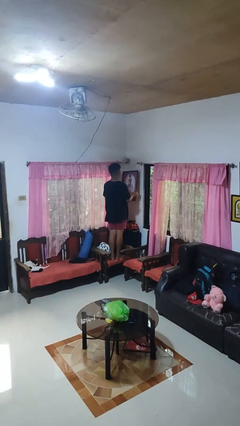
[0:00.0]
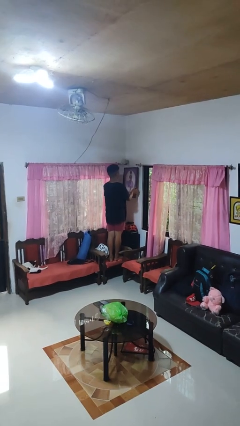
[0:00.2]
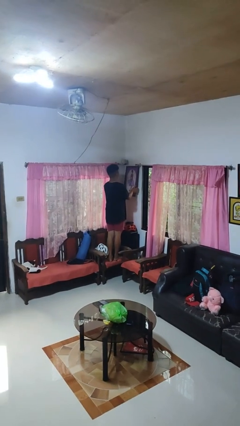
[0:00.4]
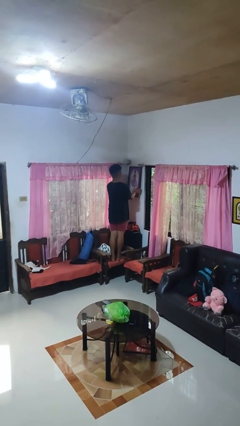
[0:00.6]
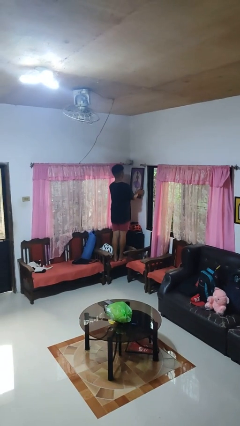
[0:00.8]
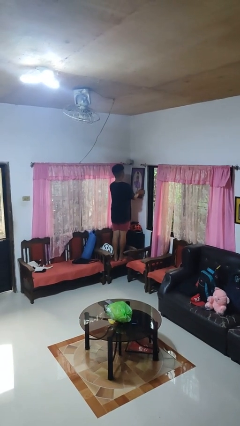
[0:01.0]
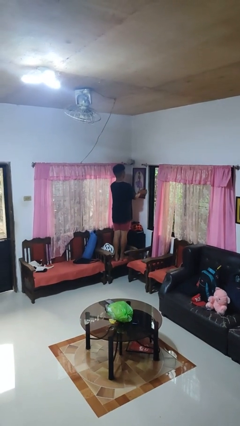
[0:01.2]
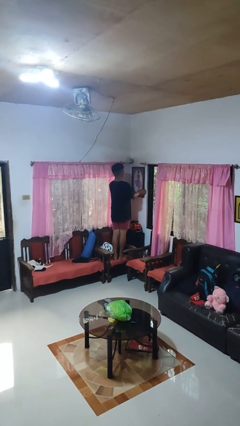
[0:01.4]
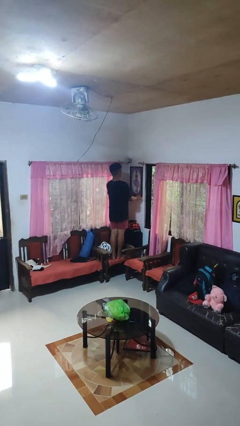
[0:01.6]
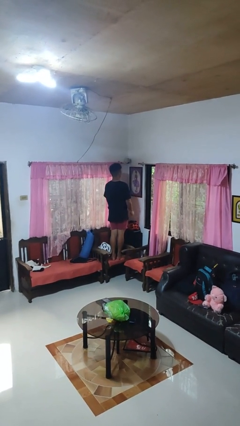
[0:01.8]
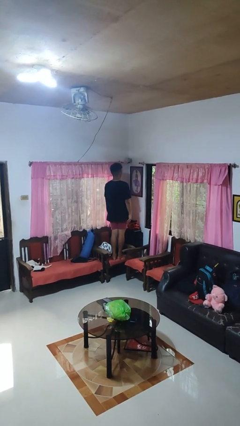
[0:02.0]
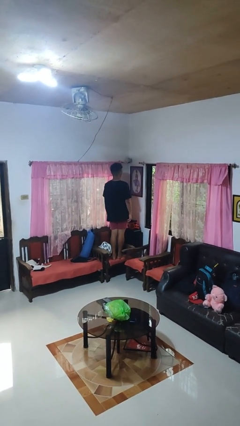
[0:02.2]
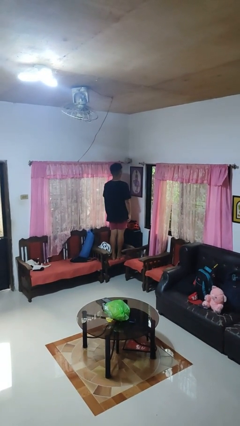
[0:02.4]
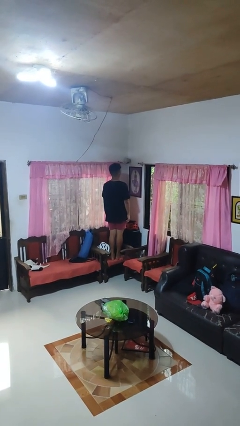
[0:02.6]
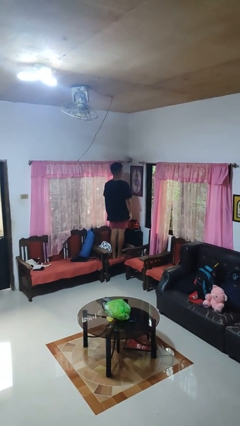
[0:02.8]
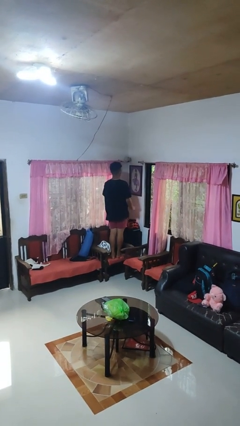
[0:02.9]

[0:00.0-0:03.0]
person puts up picture frame

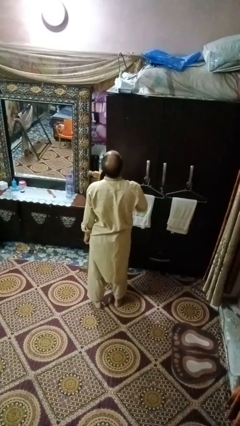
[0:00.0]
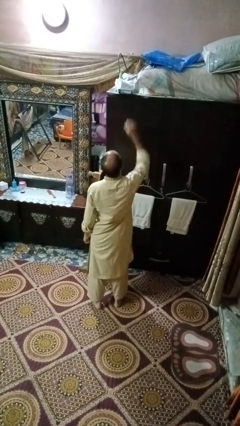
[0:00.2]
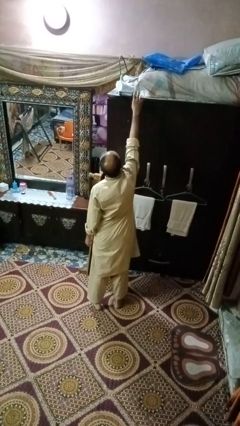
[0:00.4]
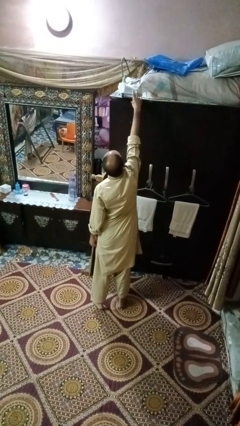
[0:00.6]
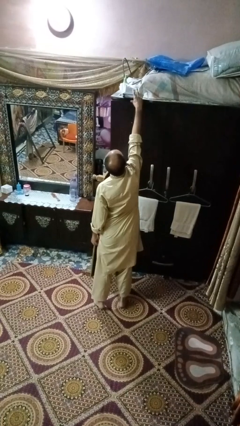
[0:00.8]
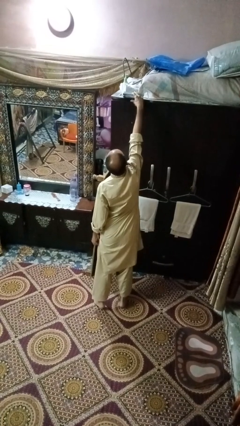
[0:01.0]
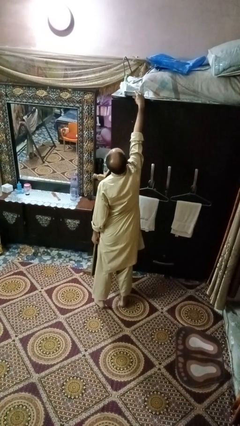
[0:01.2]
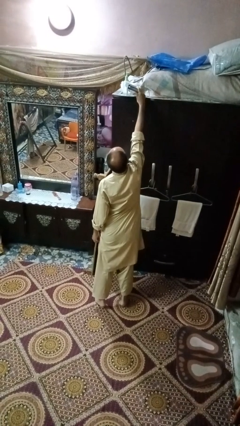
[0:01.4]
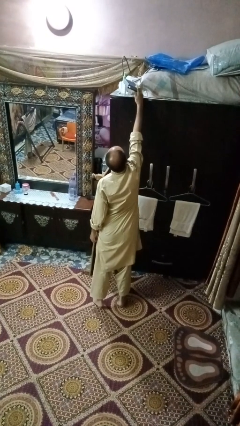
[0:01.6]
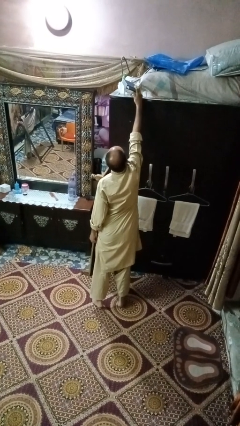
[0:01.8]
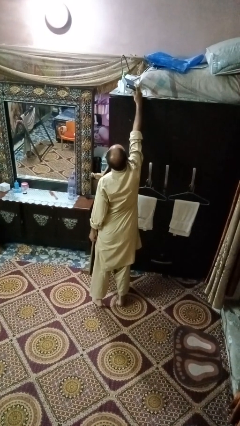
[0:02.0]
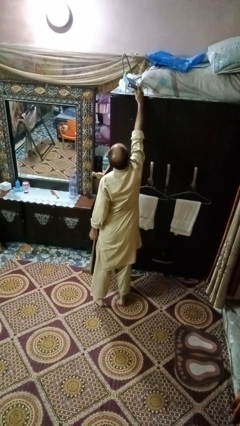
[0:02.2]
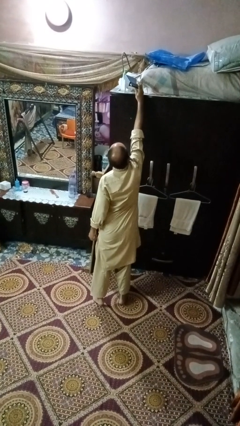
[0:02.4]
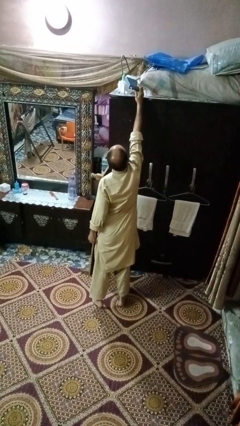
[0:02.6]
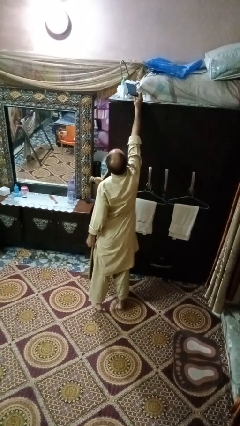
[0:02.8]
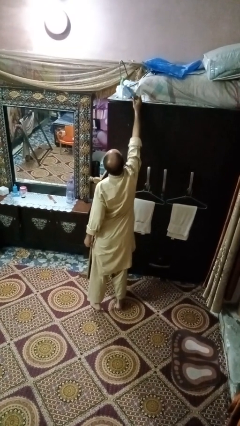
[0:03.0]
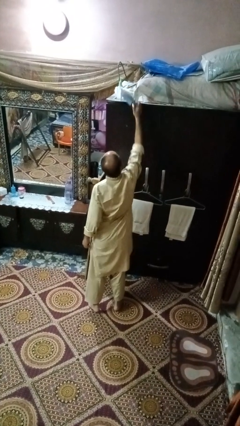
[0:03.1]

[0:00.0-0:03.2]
person picks up object from countertop

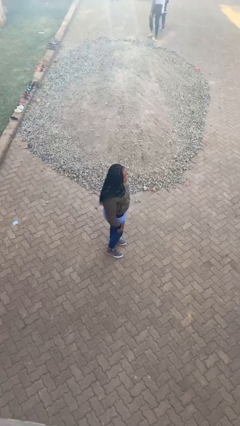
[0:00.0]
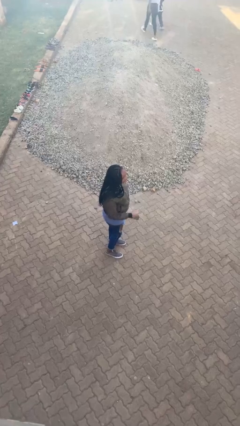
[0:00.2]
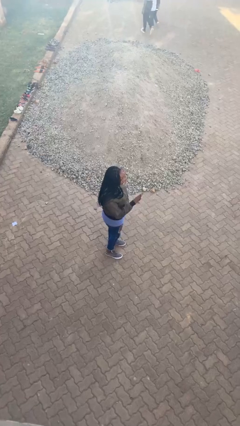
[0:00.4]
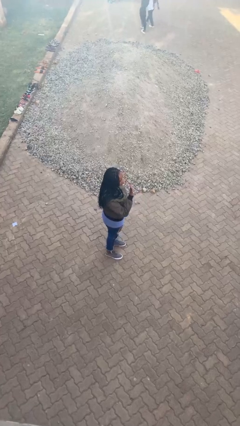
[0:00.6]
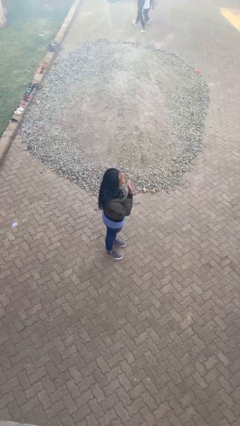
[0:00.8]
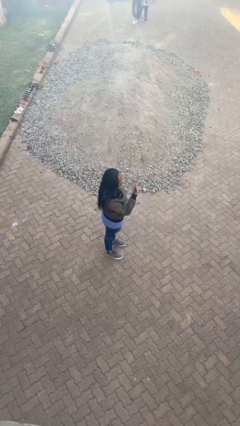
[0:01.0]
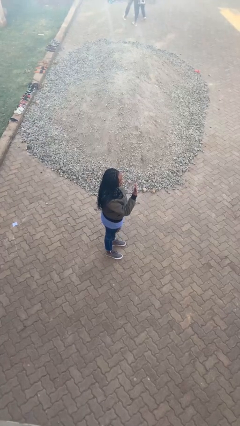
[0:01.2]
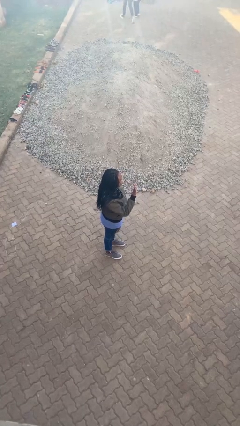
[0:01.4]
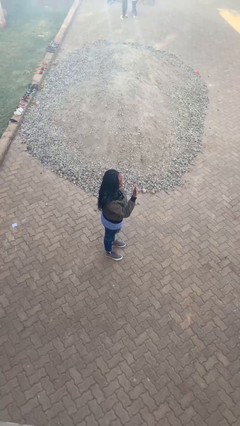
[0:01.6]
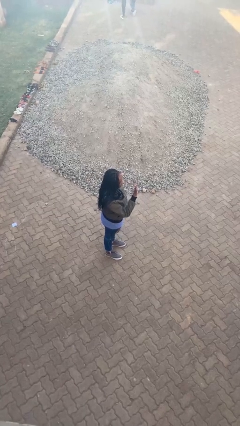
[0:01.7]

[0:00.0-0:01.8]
person gestures stop

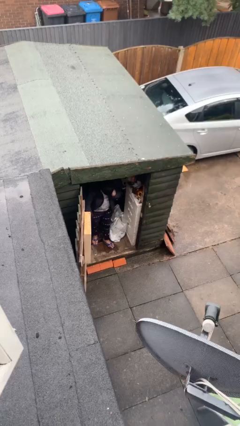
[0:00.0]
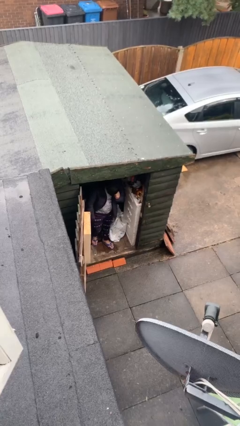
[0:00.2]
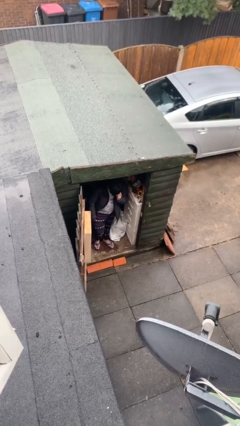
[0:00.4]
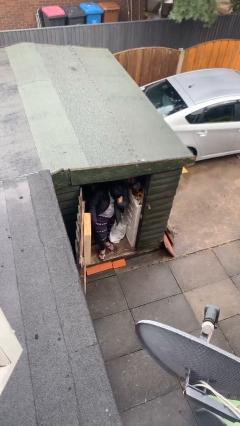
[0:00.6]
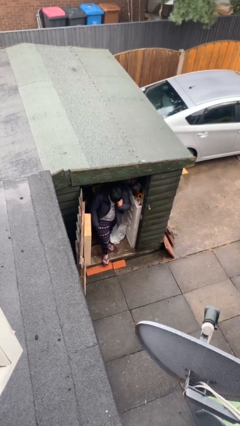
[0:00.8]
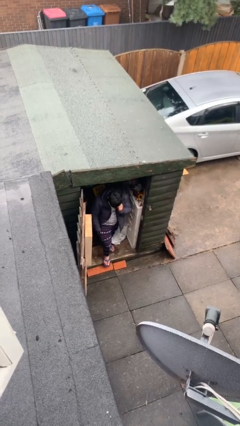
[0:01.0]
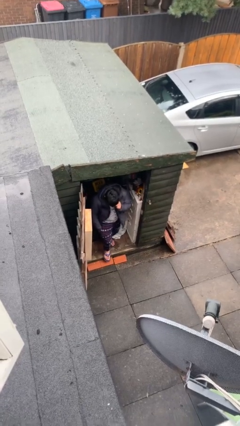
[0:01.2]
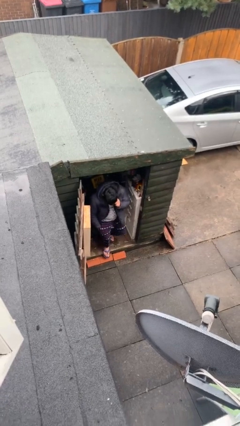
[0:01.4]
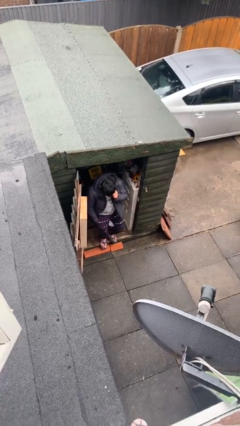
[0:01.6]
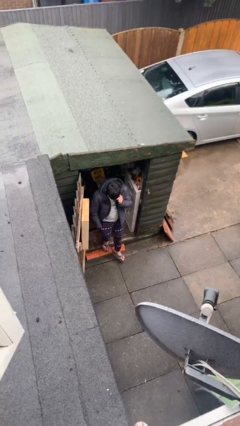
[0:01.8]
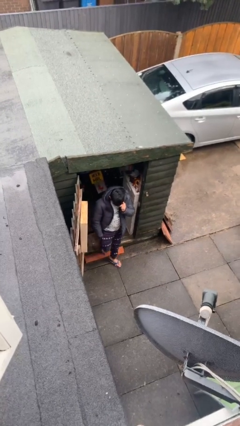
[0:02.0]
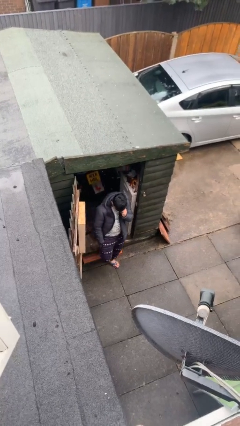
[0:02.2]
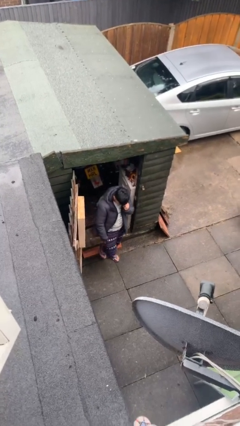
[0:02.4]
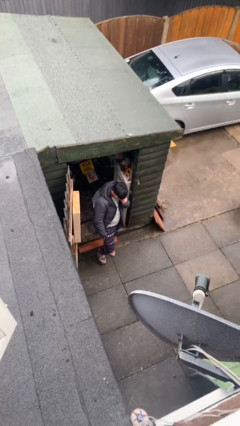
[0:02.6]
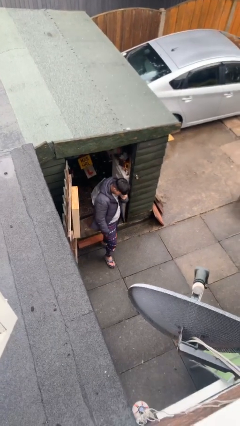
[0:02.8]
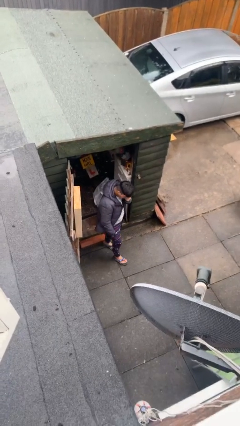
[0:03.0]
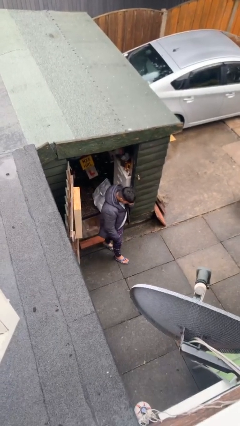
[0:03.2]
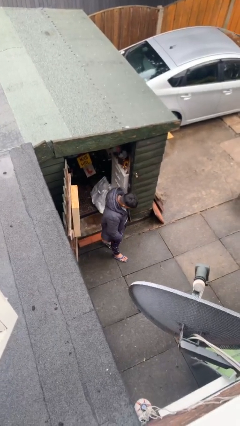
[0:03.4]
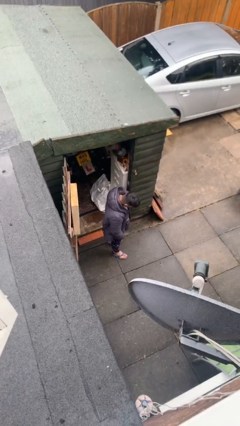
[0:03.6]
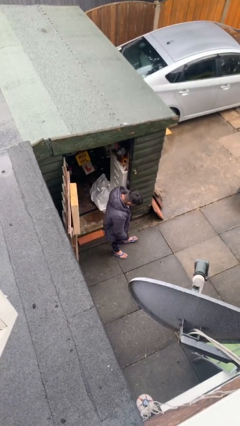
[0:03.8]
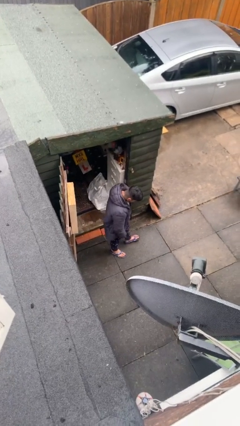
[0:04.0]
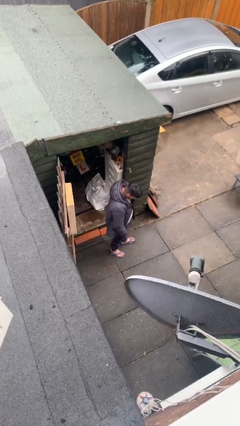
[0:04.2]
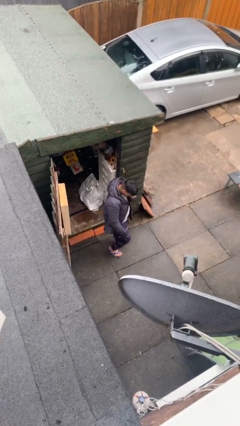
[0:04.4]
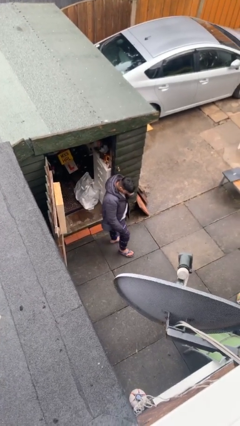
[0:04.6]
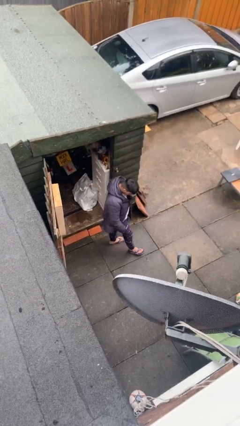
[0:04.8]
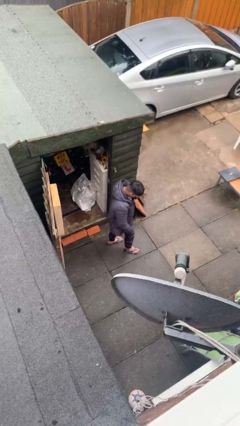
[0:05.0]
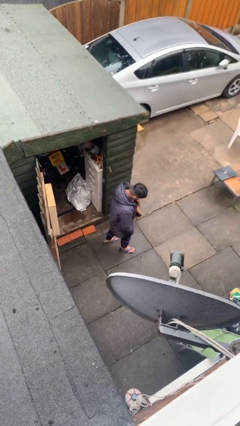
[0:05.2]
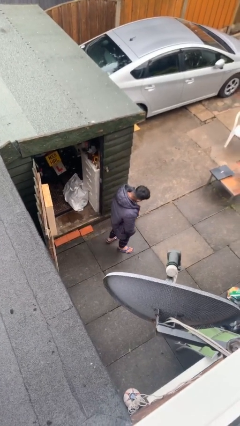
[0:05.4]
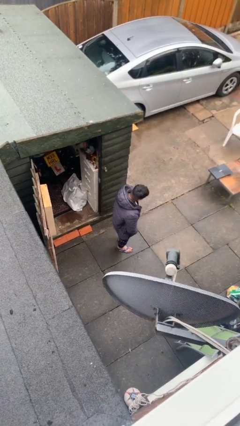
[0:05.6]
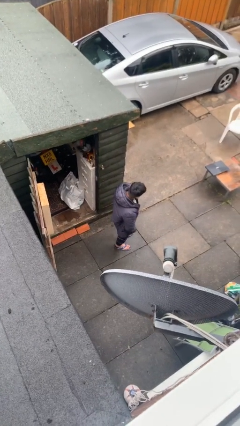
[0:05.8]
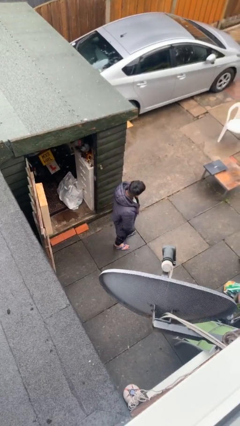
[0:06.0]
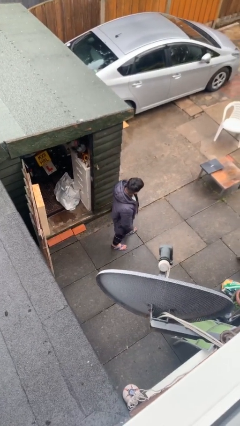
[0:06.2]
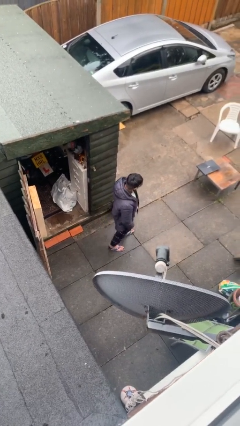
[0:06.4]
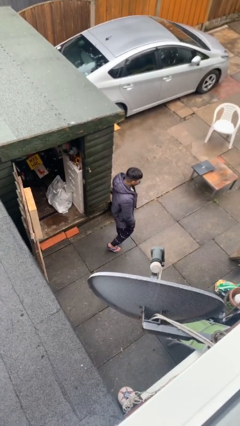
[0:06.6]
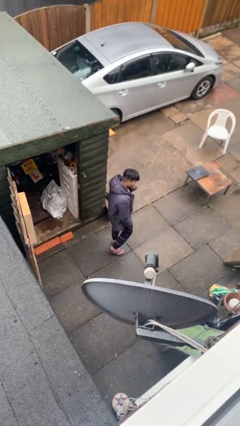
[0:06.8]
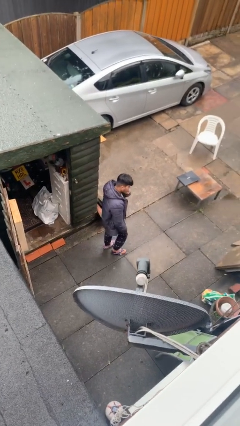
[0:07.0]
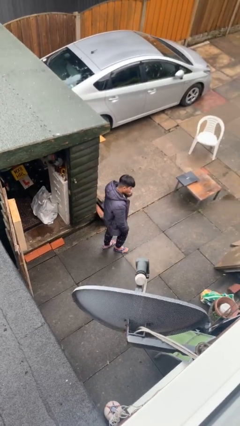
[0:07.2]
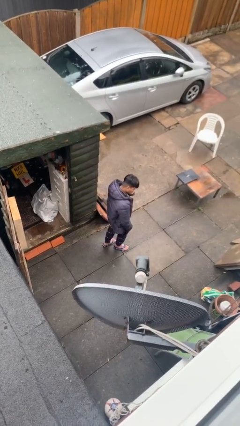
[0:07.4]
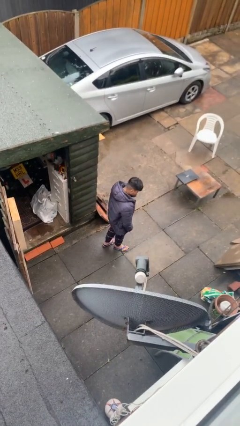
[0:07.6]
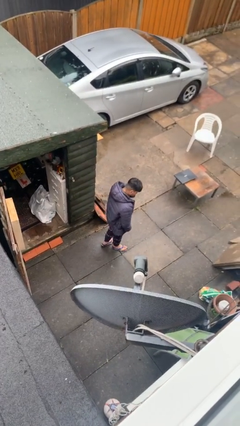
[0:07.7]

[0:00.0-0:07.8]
person enters scene through structure

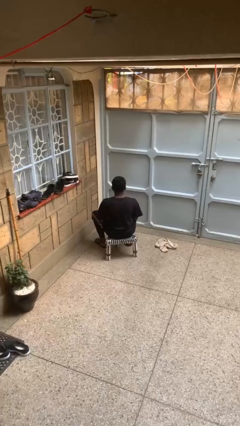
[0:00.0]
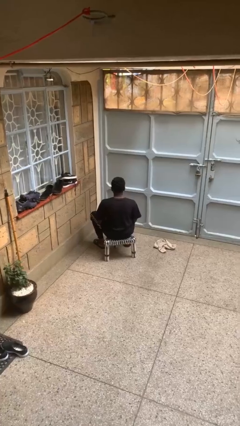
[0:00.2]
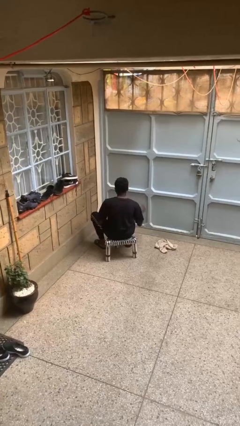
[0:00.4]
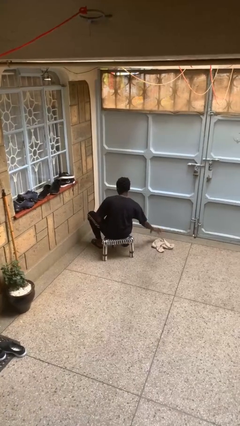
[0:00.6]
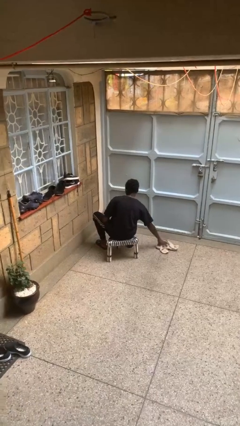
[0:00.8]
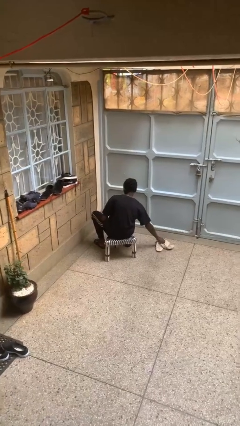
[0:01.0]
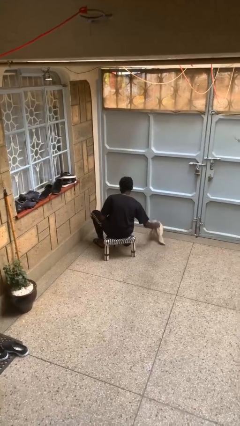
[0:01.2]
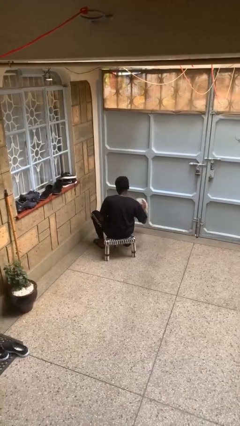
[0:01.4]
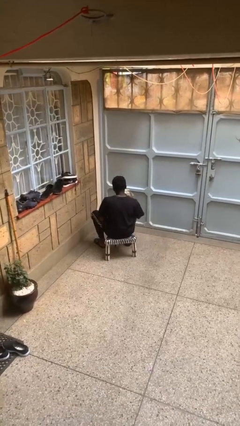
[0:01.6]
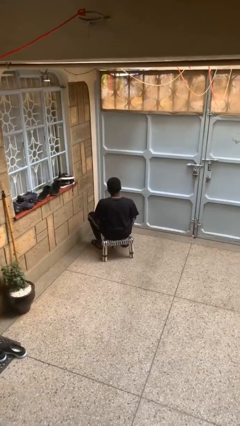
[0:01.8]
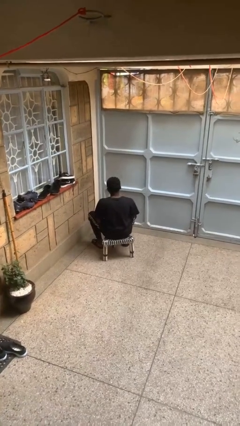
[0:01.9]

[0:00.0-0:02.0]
person picks up object from floor
